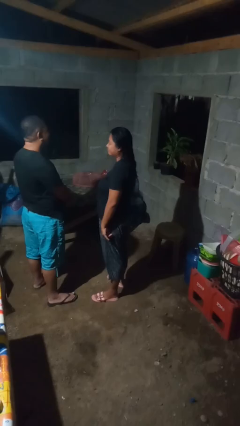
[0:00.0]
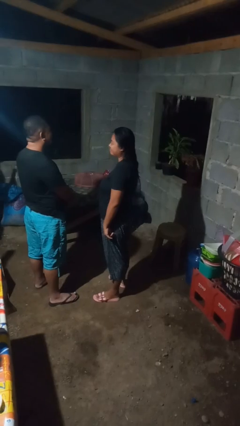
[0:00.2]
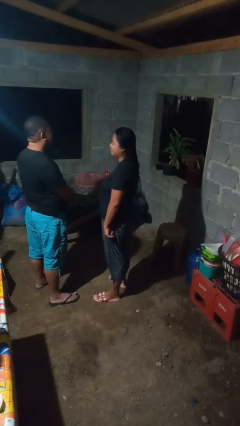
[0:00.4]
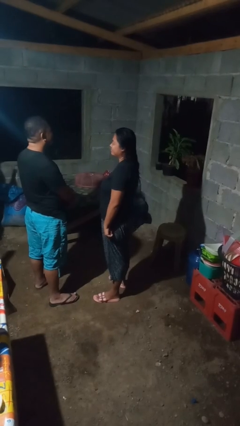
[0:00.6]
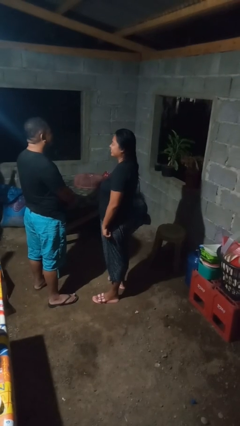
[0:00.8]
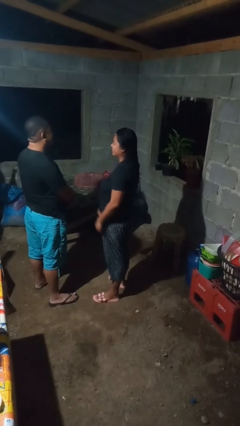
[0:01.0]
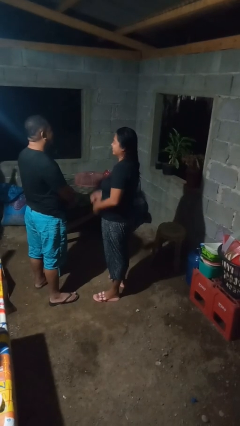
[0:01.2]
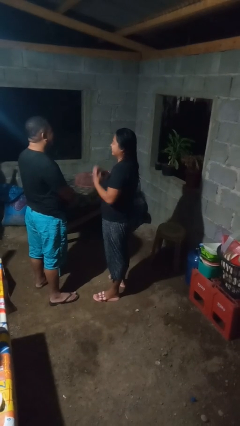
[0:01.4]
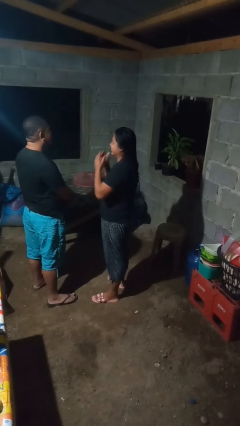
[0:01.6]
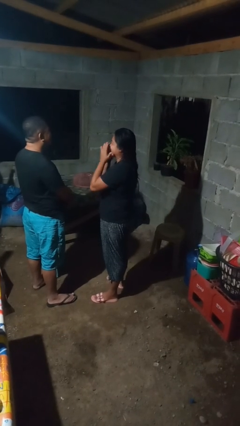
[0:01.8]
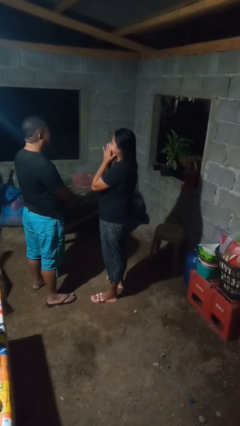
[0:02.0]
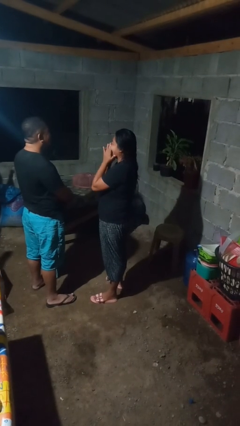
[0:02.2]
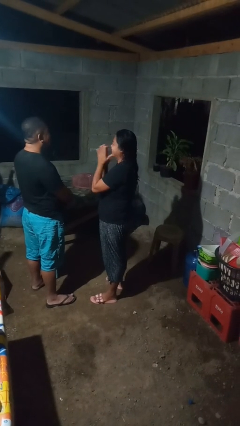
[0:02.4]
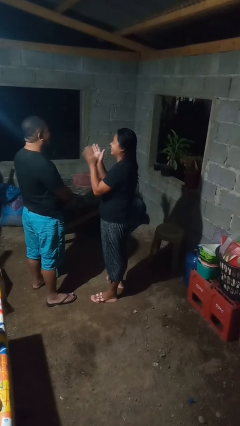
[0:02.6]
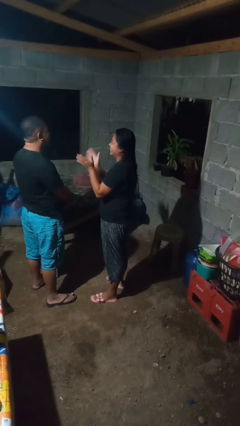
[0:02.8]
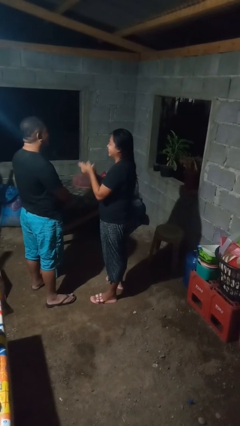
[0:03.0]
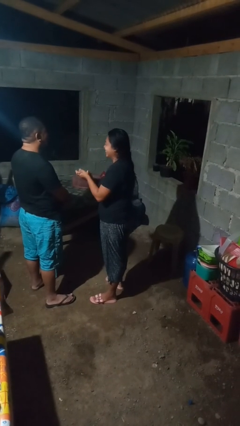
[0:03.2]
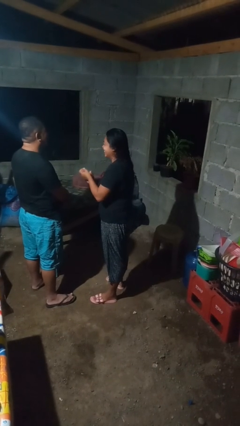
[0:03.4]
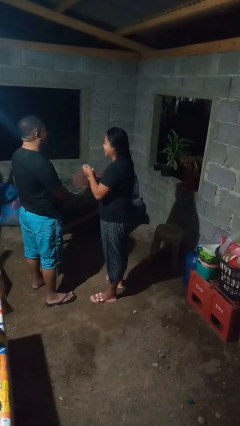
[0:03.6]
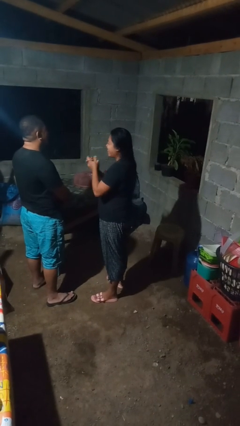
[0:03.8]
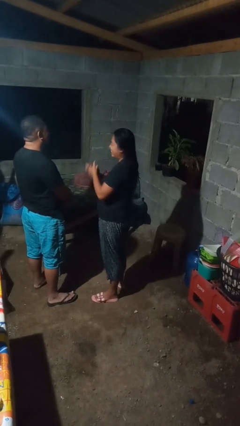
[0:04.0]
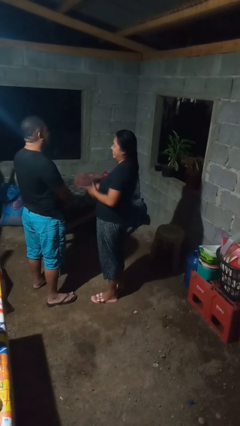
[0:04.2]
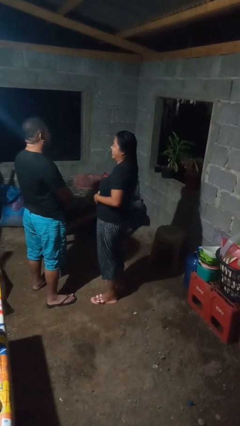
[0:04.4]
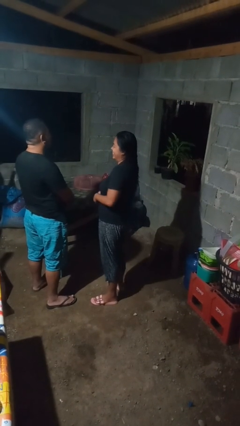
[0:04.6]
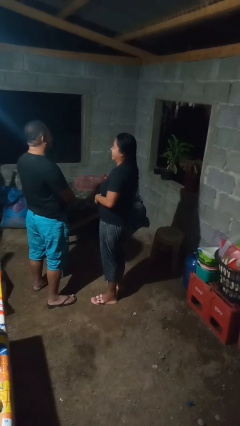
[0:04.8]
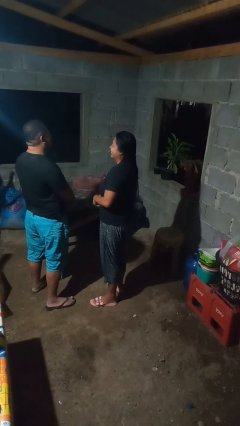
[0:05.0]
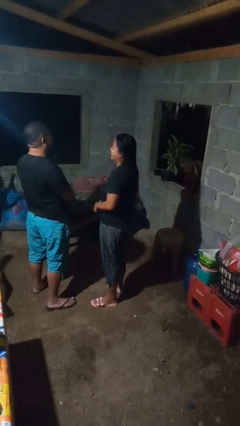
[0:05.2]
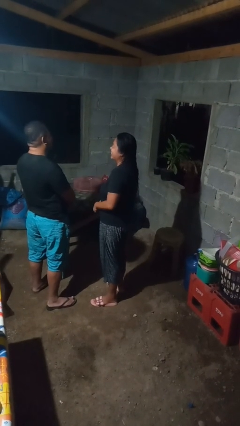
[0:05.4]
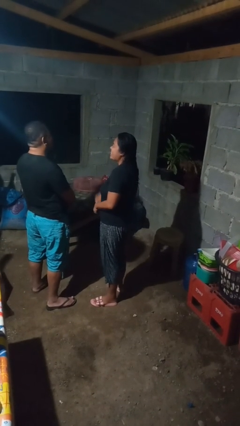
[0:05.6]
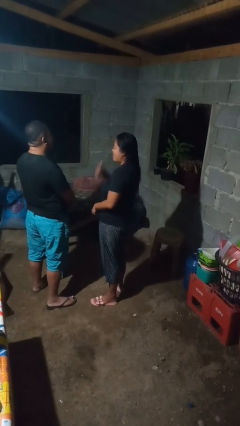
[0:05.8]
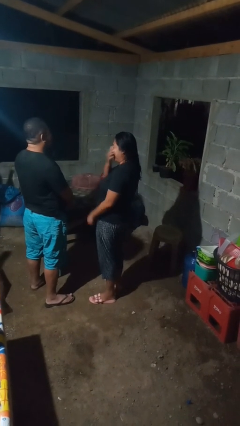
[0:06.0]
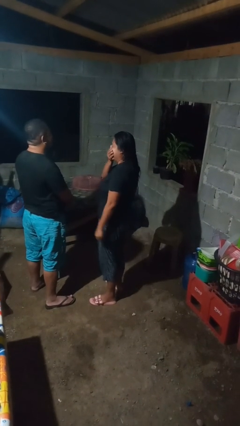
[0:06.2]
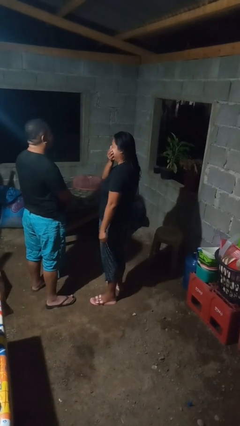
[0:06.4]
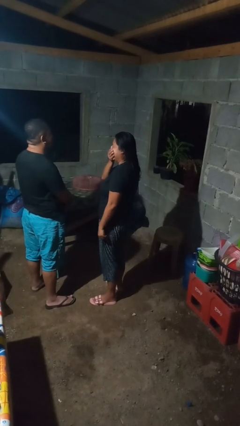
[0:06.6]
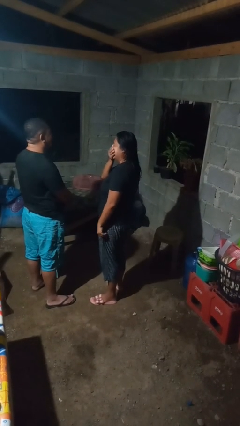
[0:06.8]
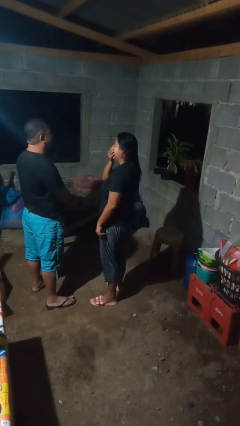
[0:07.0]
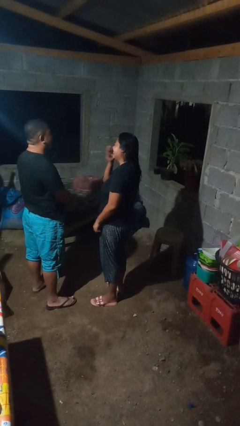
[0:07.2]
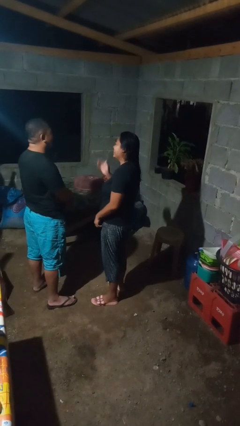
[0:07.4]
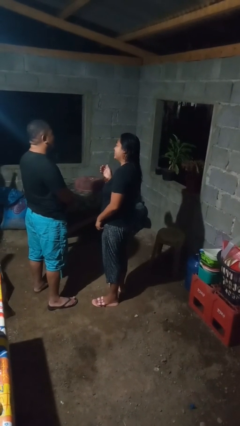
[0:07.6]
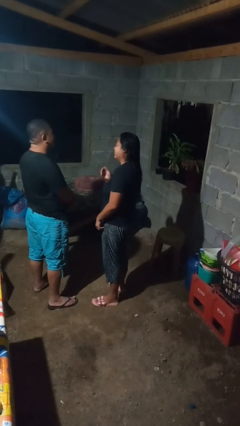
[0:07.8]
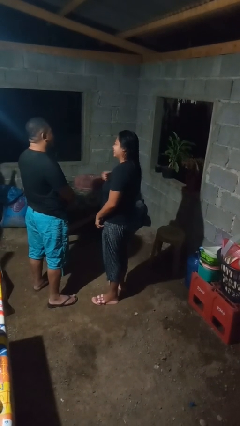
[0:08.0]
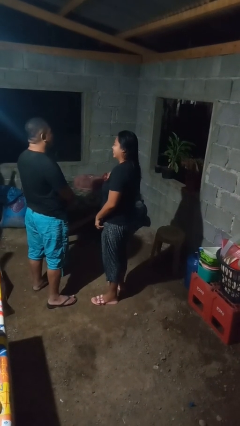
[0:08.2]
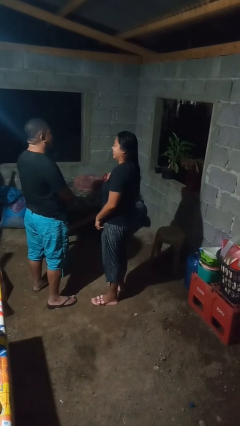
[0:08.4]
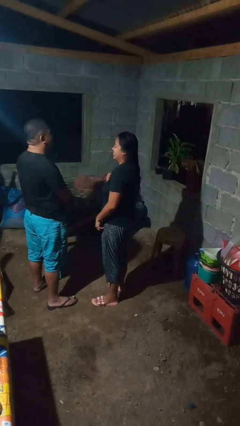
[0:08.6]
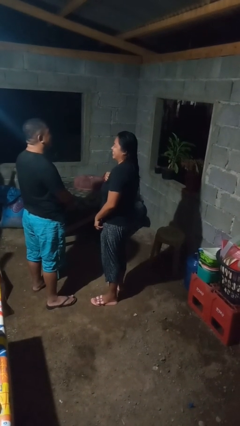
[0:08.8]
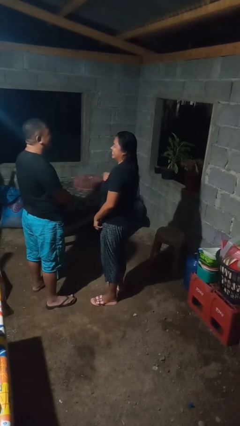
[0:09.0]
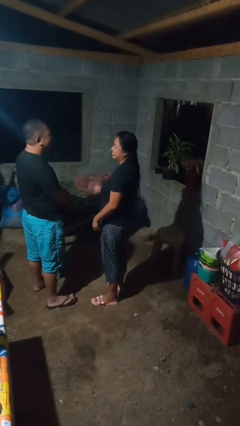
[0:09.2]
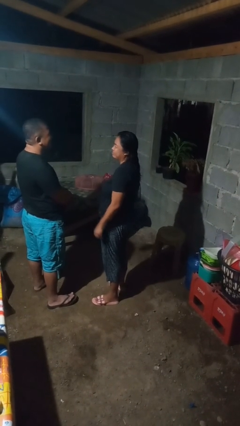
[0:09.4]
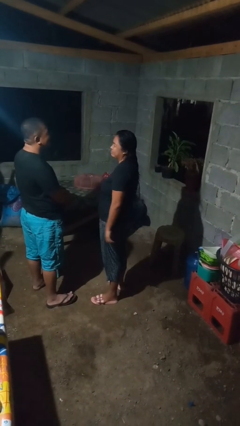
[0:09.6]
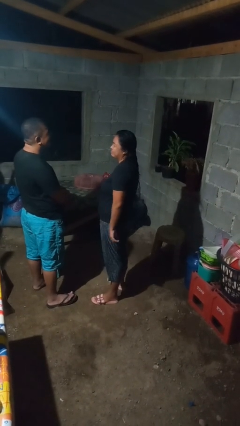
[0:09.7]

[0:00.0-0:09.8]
person laughs with person

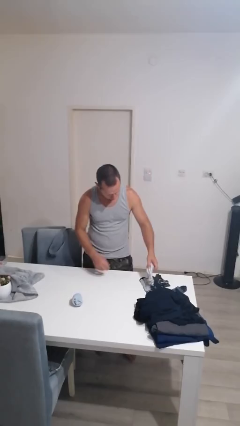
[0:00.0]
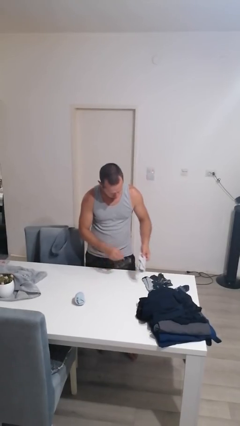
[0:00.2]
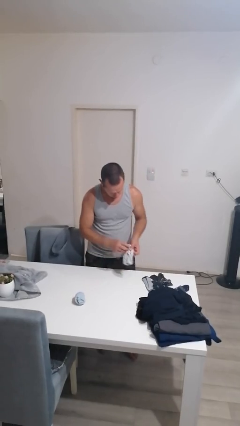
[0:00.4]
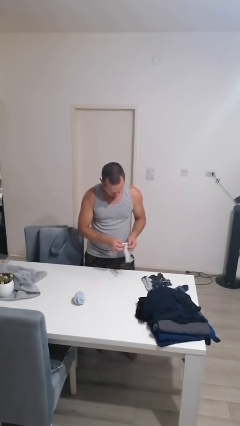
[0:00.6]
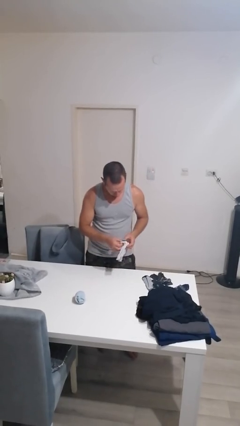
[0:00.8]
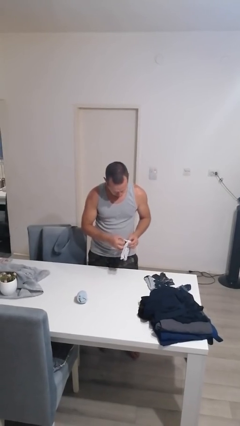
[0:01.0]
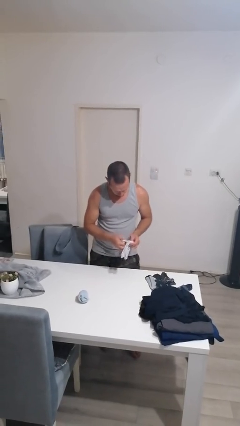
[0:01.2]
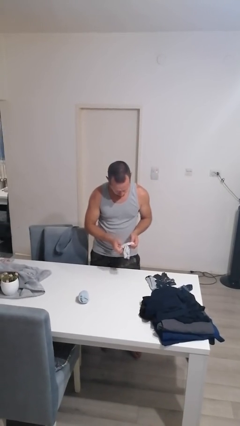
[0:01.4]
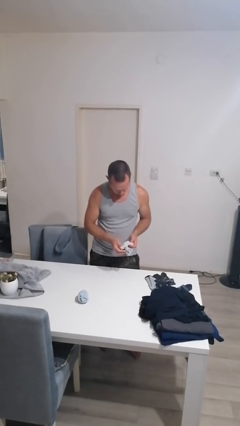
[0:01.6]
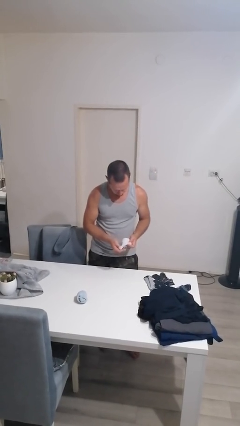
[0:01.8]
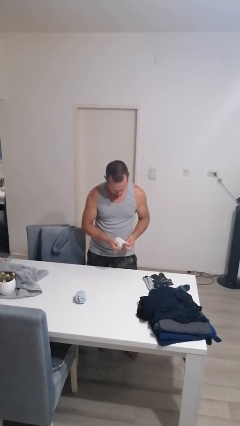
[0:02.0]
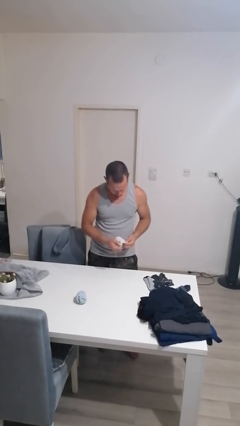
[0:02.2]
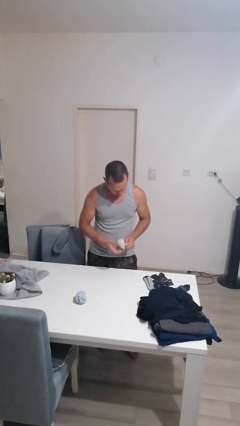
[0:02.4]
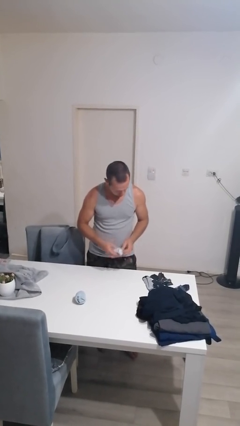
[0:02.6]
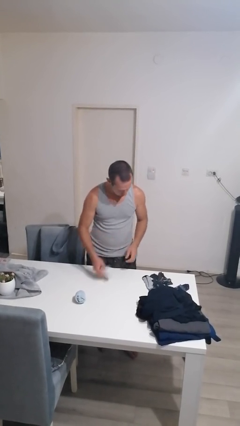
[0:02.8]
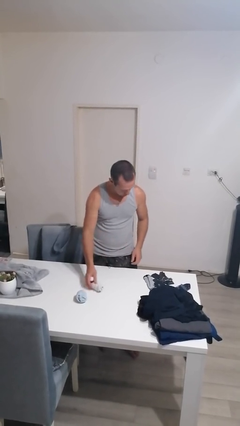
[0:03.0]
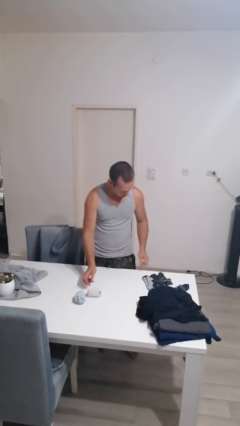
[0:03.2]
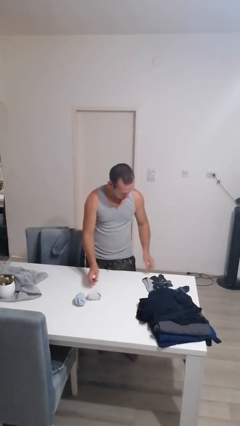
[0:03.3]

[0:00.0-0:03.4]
person folds socks

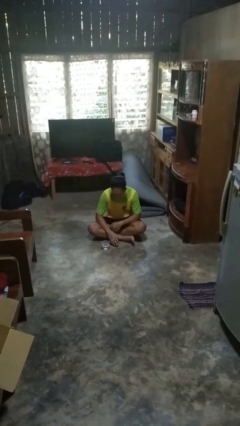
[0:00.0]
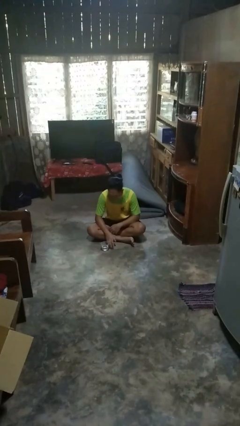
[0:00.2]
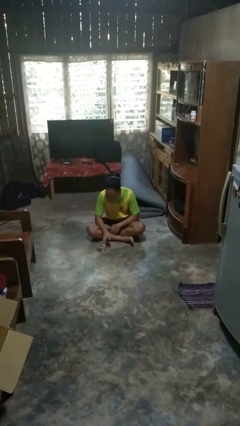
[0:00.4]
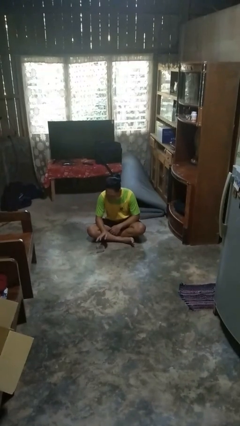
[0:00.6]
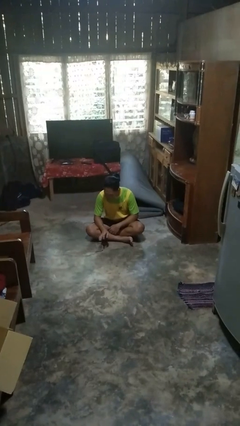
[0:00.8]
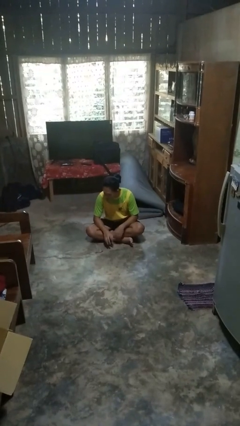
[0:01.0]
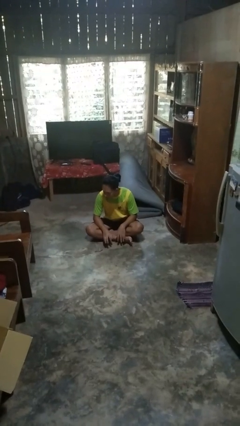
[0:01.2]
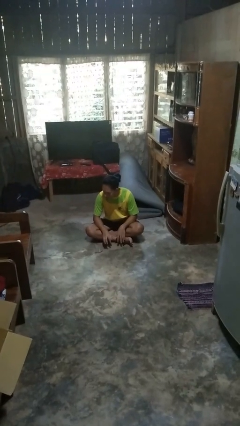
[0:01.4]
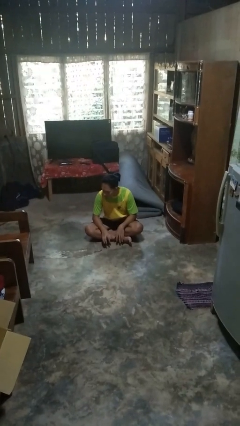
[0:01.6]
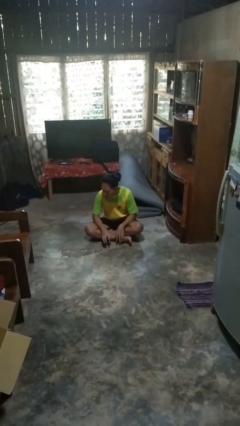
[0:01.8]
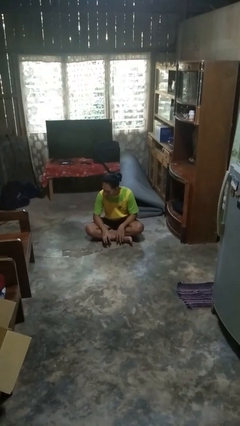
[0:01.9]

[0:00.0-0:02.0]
person spills on floor

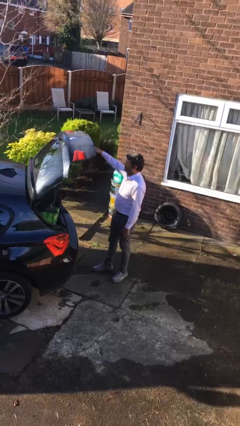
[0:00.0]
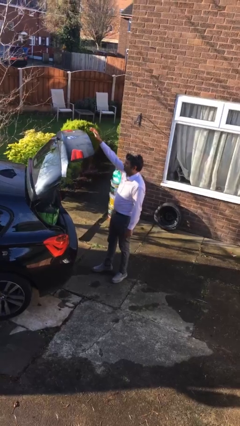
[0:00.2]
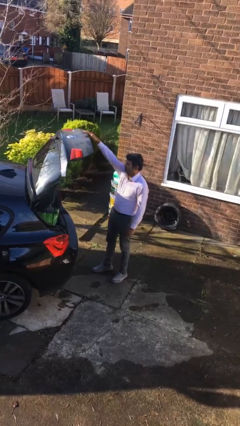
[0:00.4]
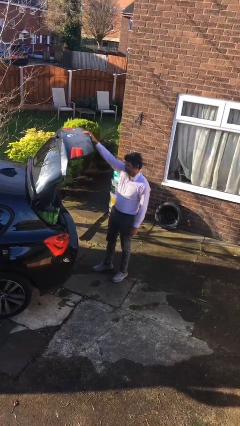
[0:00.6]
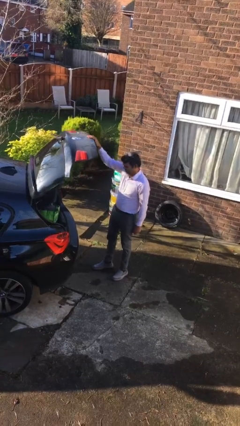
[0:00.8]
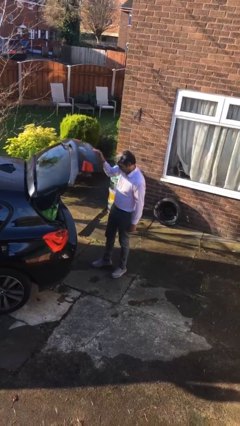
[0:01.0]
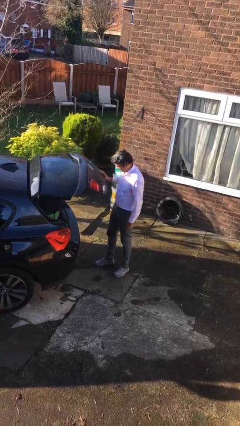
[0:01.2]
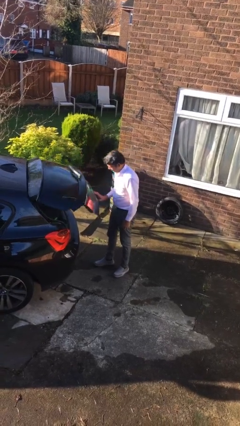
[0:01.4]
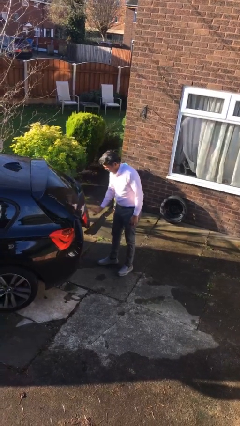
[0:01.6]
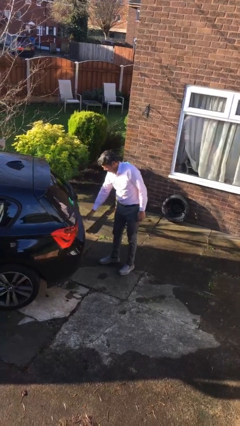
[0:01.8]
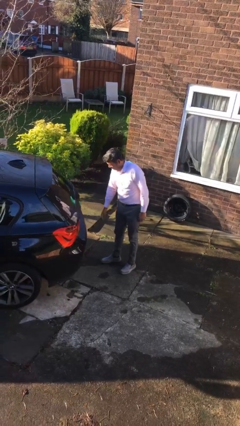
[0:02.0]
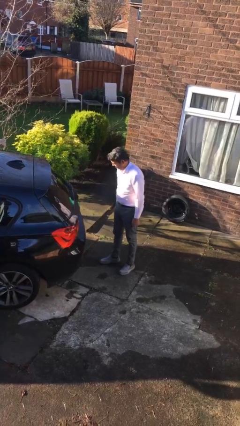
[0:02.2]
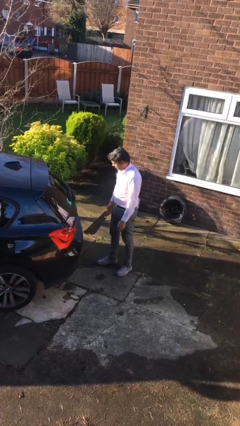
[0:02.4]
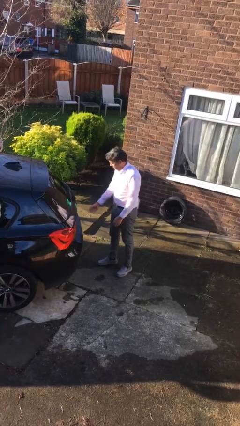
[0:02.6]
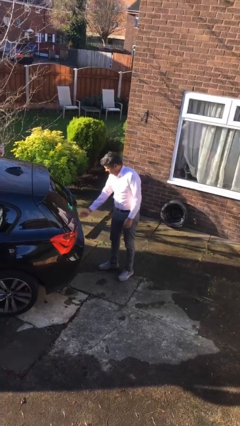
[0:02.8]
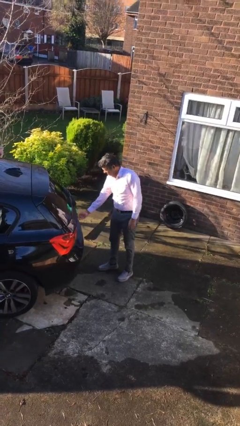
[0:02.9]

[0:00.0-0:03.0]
person closes car trunk
